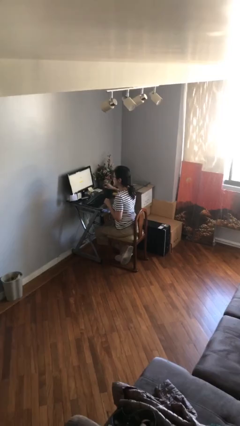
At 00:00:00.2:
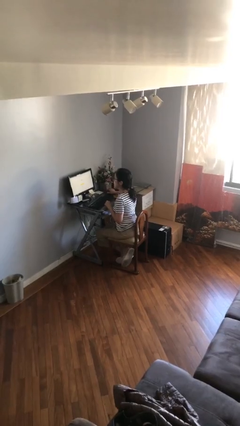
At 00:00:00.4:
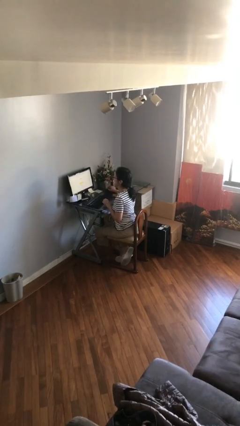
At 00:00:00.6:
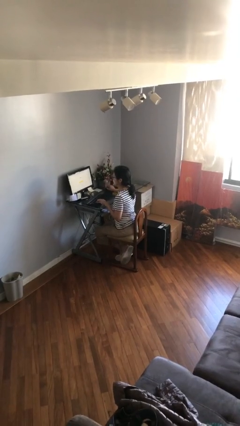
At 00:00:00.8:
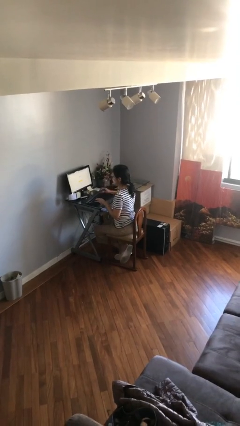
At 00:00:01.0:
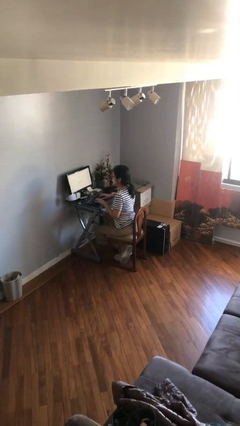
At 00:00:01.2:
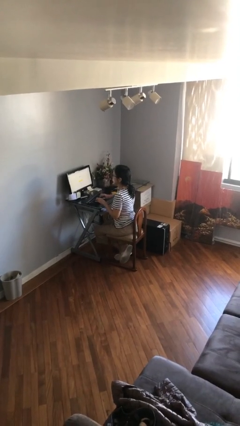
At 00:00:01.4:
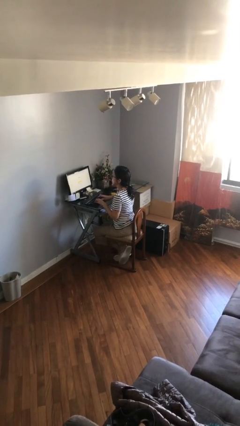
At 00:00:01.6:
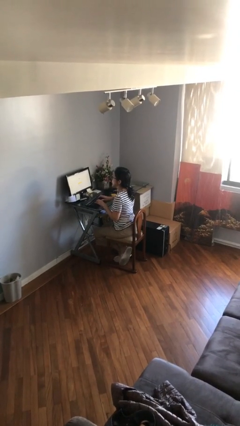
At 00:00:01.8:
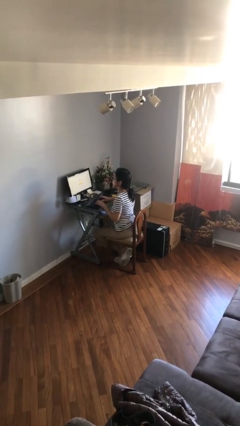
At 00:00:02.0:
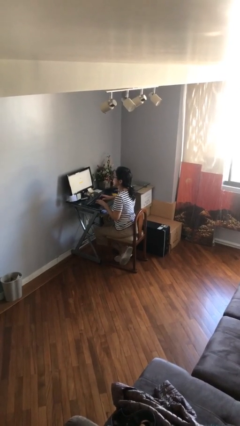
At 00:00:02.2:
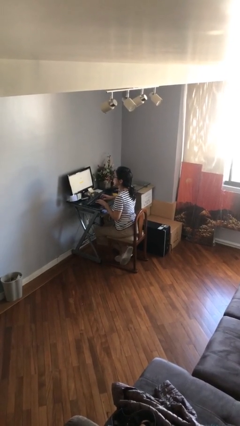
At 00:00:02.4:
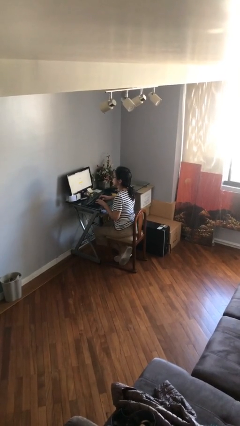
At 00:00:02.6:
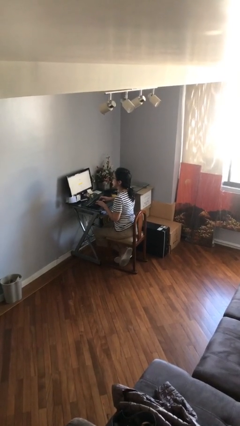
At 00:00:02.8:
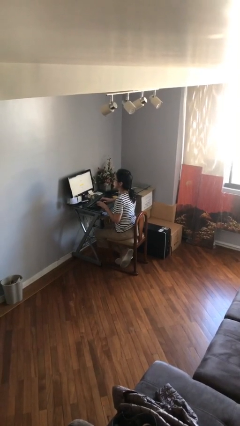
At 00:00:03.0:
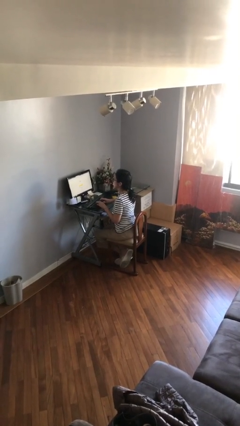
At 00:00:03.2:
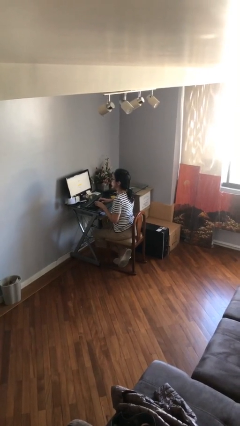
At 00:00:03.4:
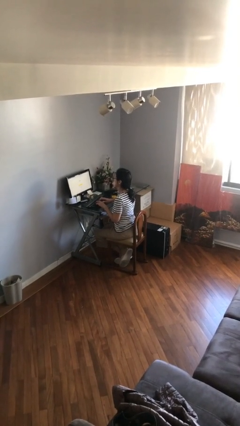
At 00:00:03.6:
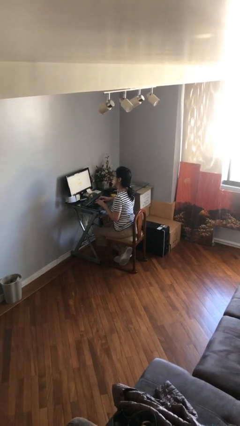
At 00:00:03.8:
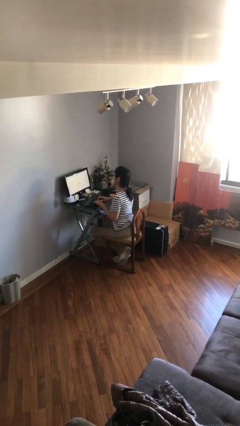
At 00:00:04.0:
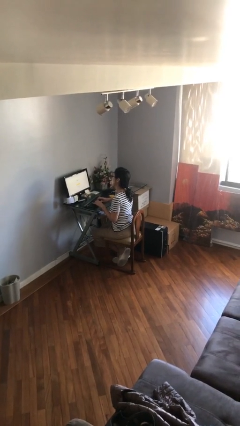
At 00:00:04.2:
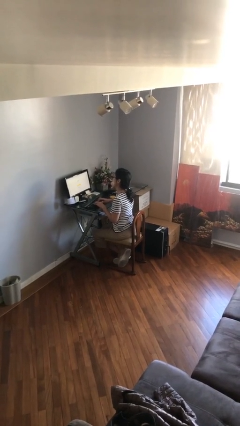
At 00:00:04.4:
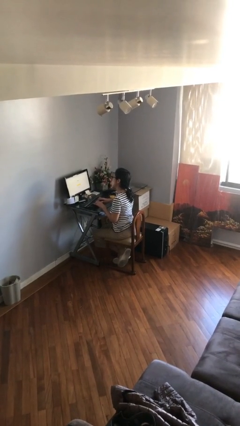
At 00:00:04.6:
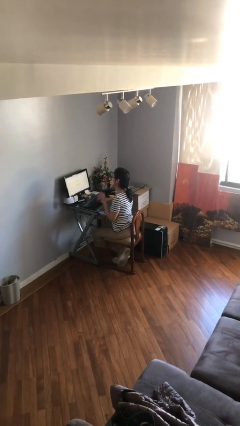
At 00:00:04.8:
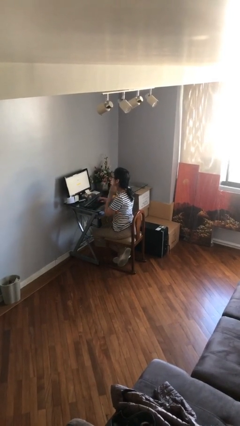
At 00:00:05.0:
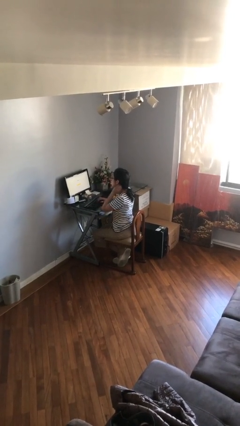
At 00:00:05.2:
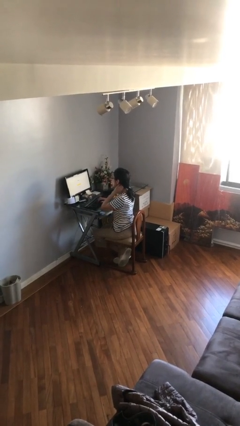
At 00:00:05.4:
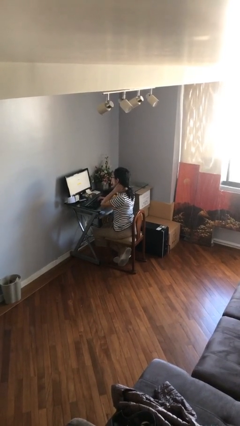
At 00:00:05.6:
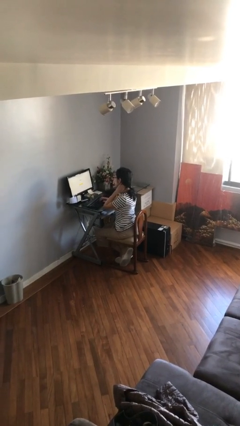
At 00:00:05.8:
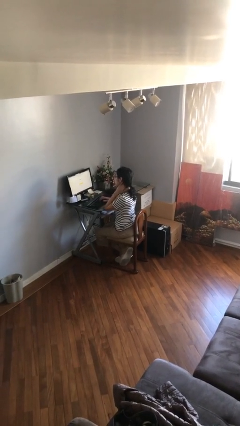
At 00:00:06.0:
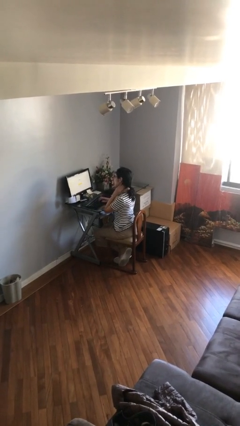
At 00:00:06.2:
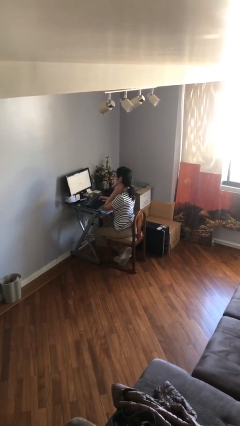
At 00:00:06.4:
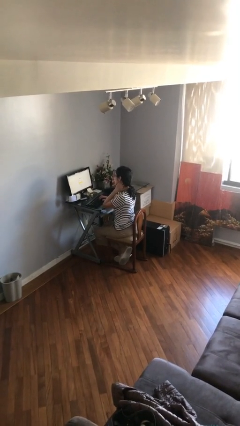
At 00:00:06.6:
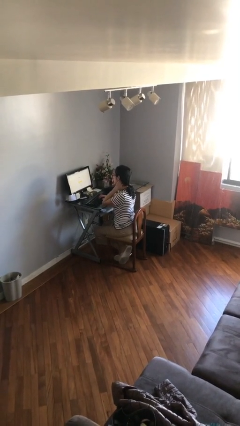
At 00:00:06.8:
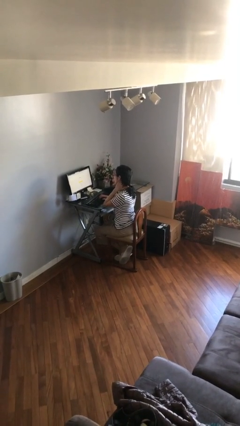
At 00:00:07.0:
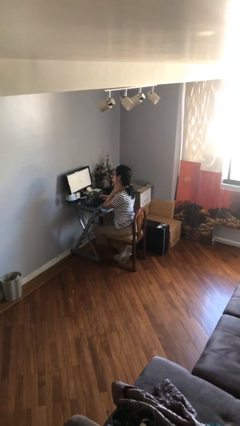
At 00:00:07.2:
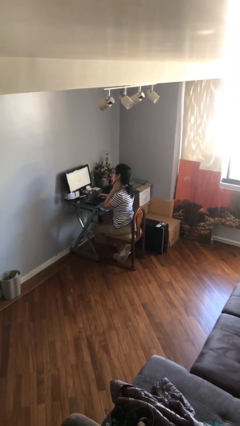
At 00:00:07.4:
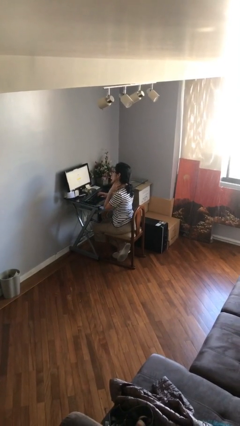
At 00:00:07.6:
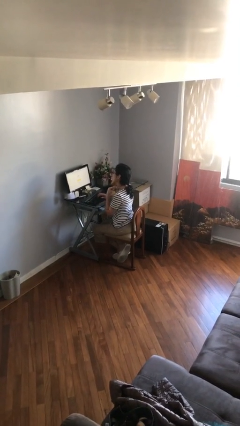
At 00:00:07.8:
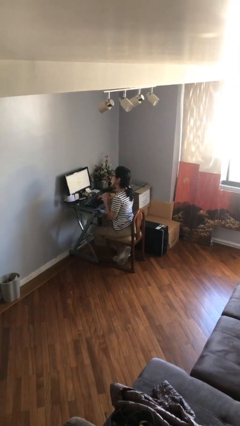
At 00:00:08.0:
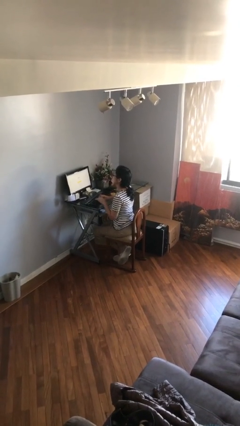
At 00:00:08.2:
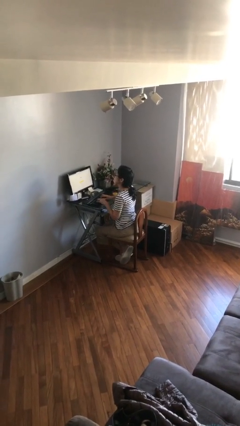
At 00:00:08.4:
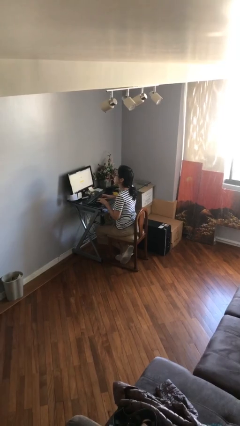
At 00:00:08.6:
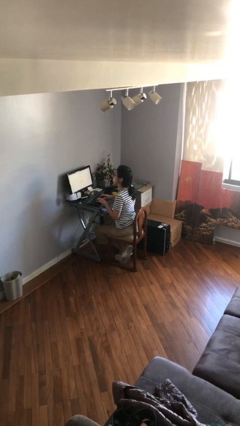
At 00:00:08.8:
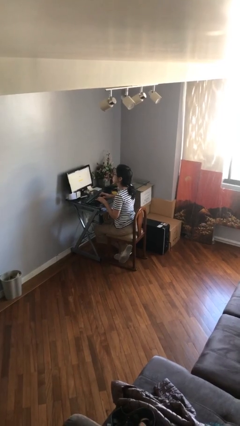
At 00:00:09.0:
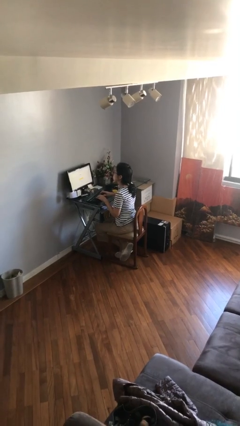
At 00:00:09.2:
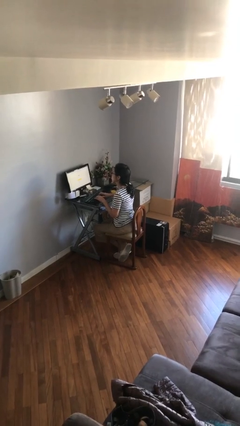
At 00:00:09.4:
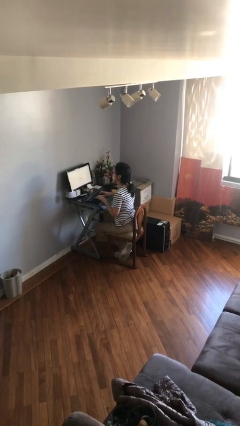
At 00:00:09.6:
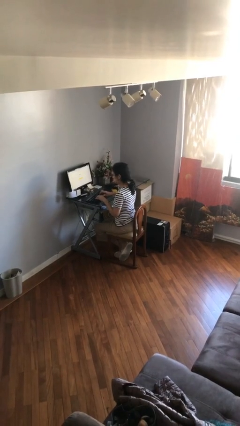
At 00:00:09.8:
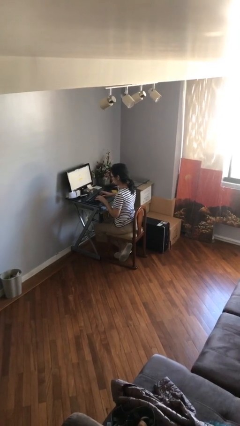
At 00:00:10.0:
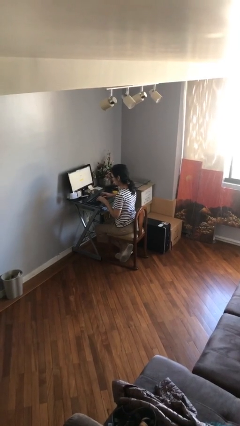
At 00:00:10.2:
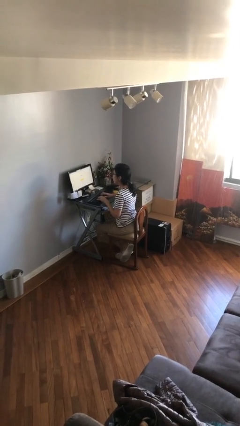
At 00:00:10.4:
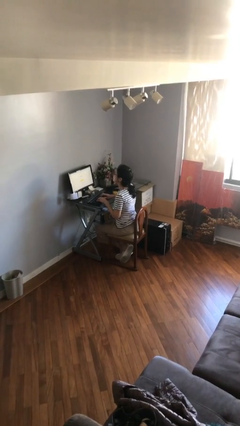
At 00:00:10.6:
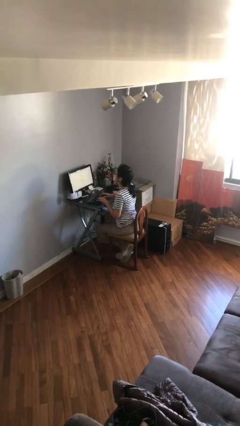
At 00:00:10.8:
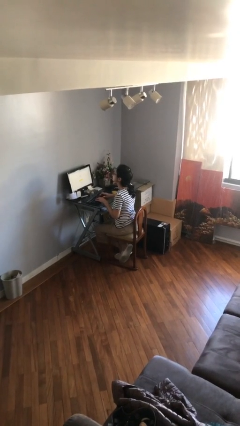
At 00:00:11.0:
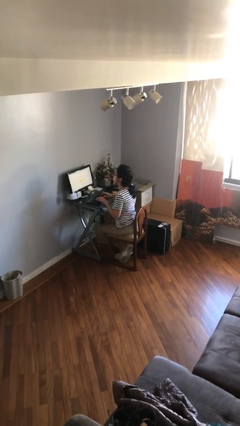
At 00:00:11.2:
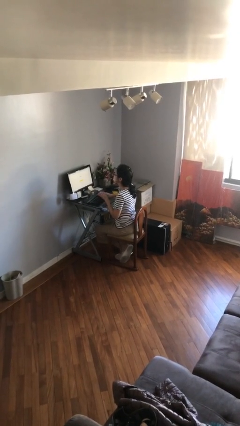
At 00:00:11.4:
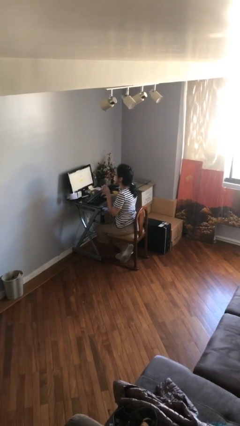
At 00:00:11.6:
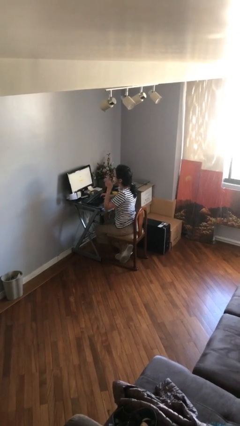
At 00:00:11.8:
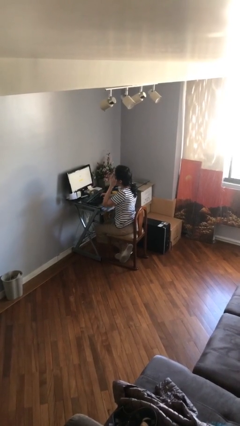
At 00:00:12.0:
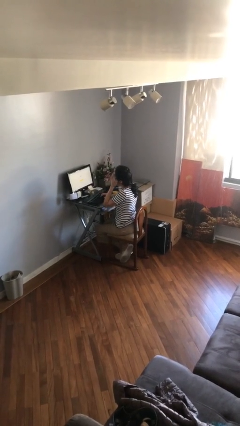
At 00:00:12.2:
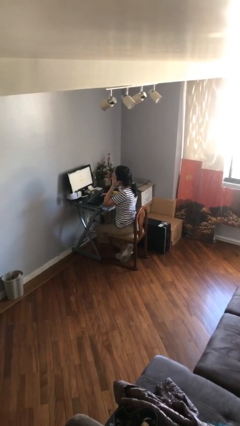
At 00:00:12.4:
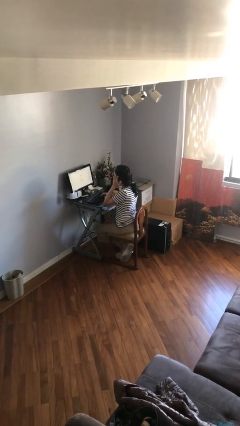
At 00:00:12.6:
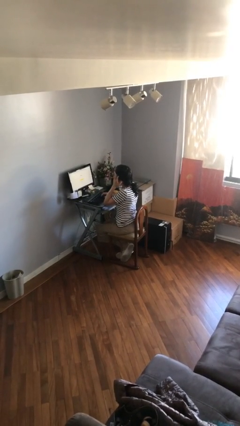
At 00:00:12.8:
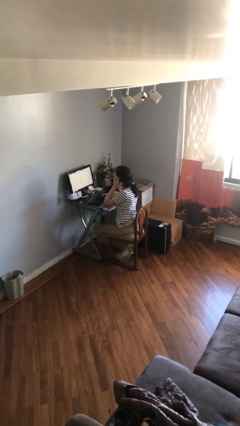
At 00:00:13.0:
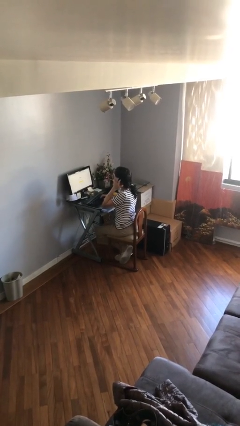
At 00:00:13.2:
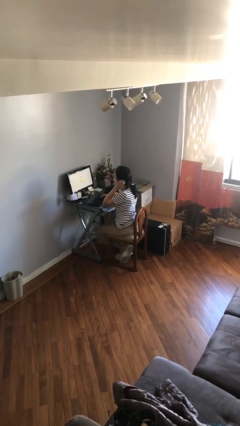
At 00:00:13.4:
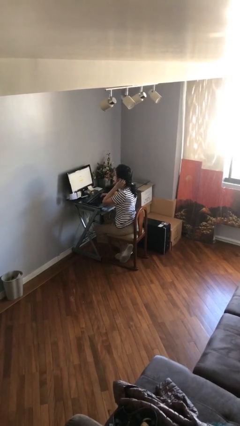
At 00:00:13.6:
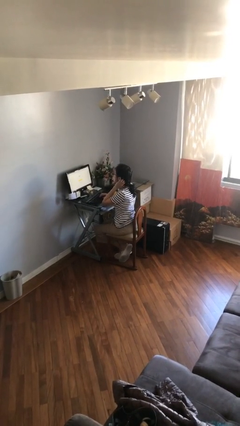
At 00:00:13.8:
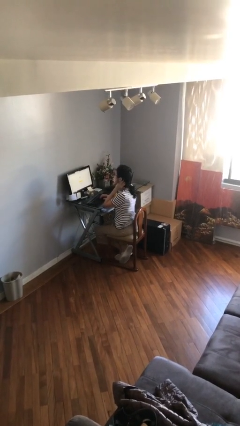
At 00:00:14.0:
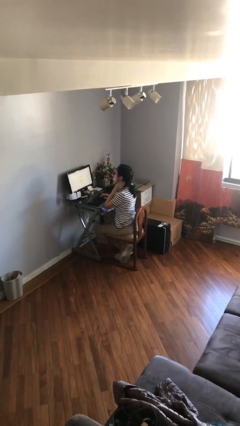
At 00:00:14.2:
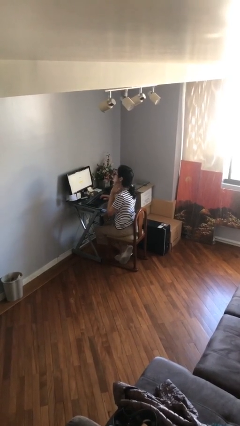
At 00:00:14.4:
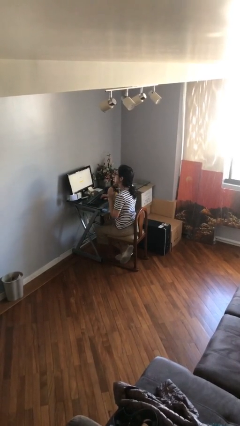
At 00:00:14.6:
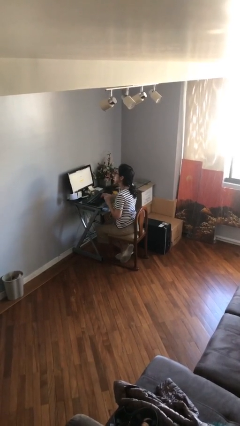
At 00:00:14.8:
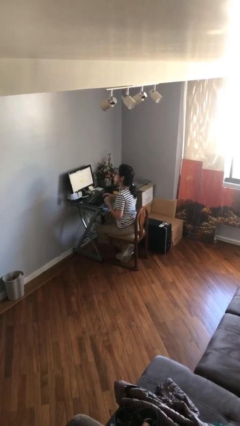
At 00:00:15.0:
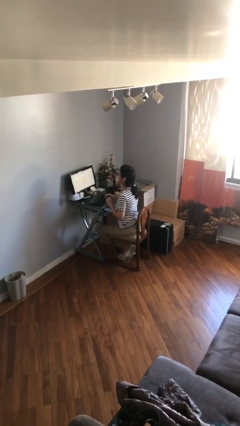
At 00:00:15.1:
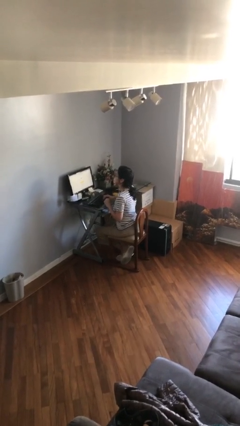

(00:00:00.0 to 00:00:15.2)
person interacts with laptop

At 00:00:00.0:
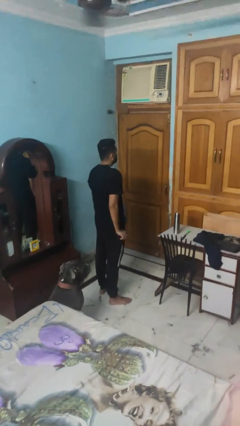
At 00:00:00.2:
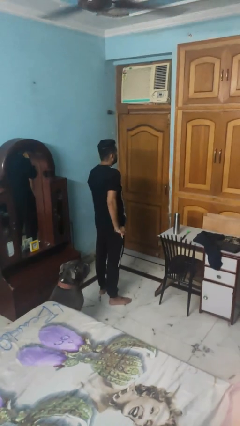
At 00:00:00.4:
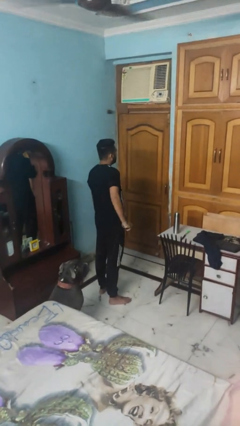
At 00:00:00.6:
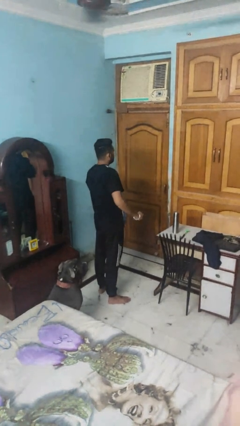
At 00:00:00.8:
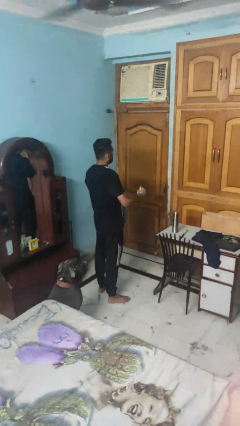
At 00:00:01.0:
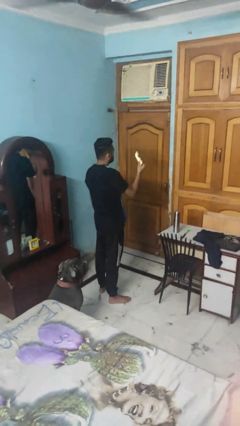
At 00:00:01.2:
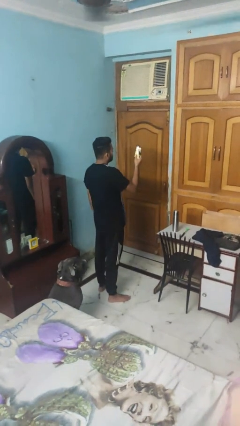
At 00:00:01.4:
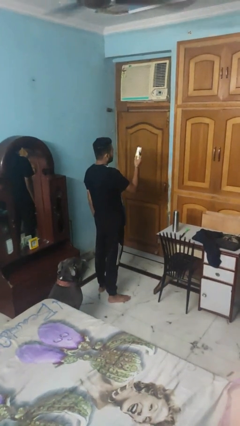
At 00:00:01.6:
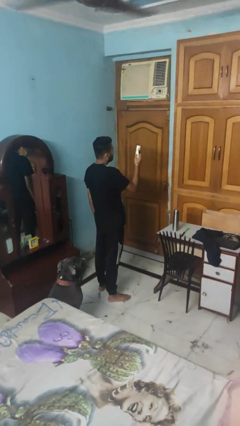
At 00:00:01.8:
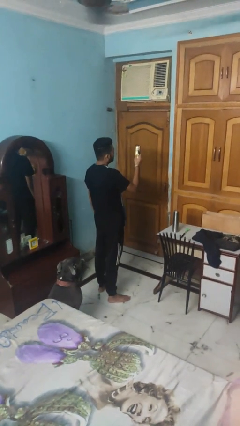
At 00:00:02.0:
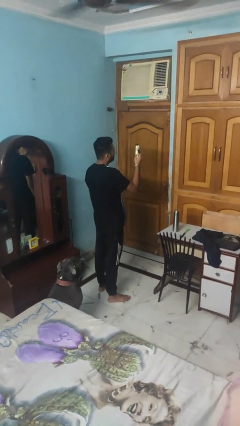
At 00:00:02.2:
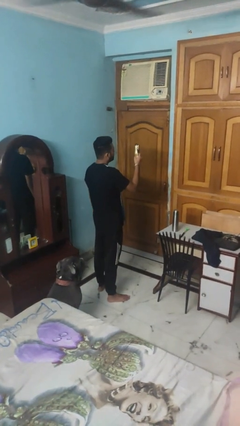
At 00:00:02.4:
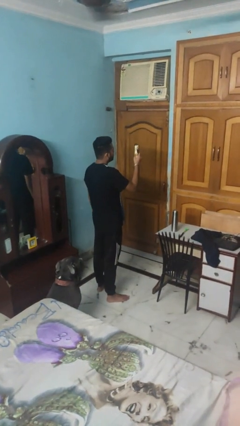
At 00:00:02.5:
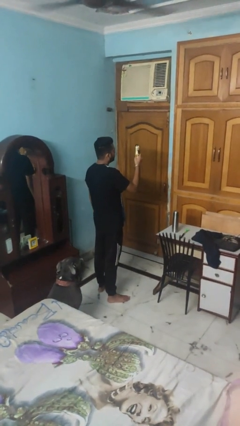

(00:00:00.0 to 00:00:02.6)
person takes phone from pocket

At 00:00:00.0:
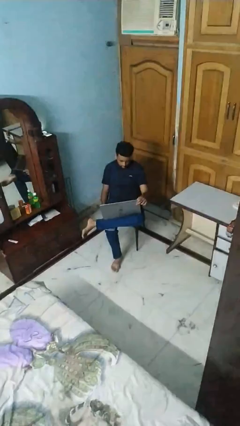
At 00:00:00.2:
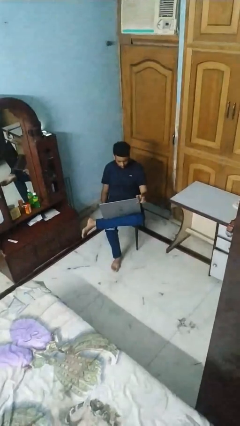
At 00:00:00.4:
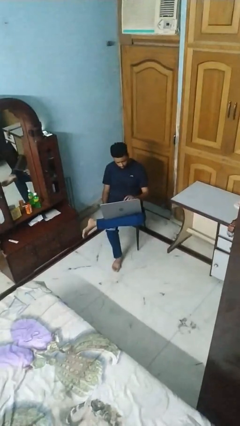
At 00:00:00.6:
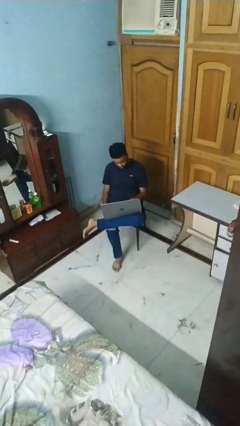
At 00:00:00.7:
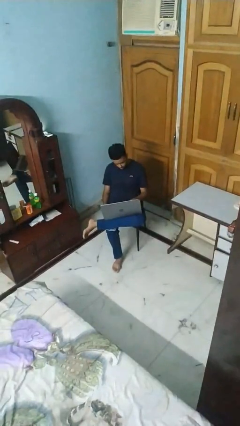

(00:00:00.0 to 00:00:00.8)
person opens laptop
